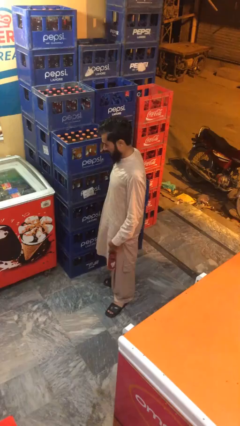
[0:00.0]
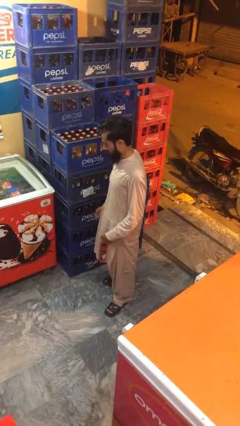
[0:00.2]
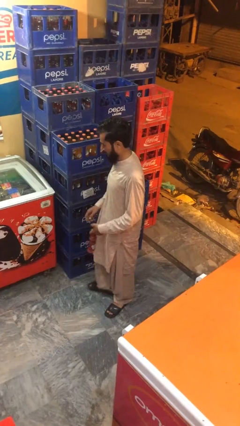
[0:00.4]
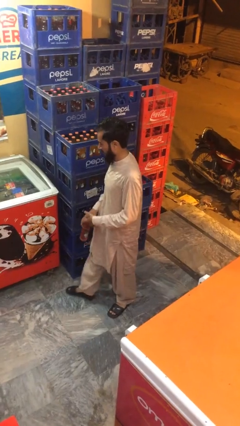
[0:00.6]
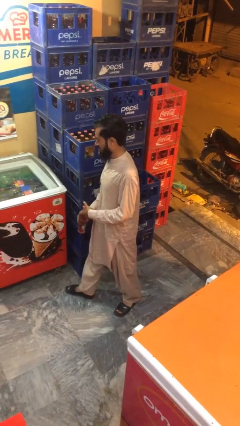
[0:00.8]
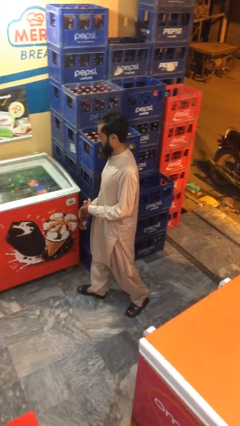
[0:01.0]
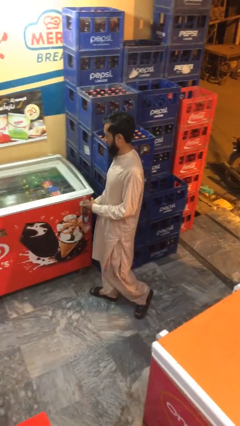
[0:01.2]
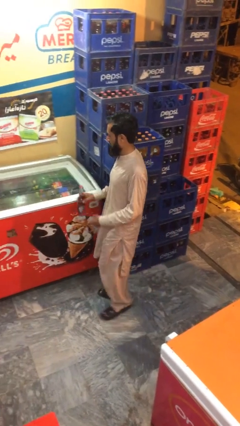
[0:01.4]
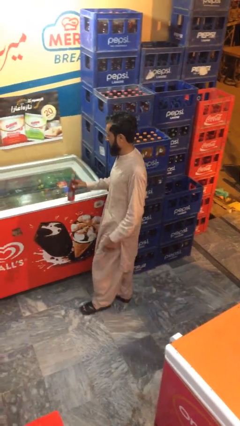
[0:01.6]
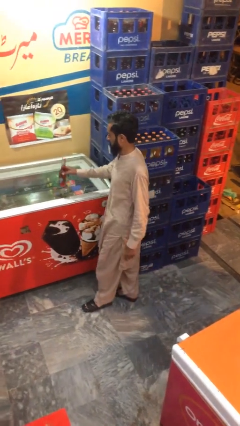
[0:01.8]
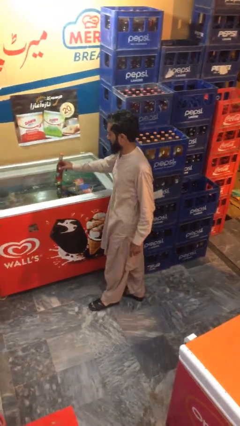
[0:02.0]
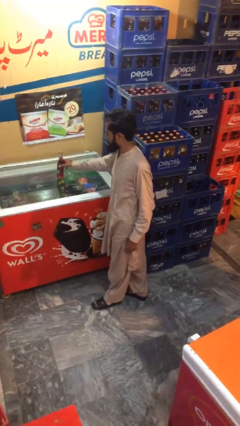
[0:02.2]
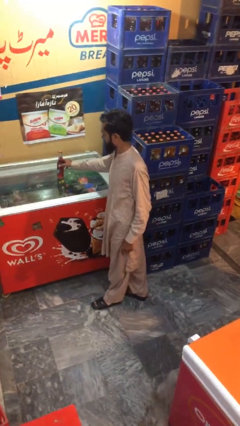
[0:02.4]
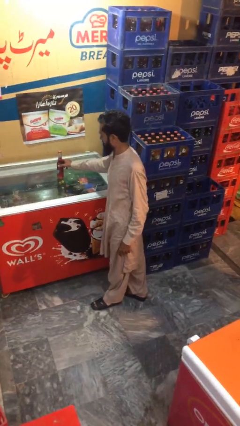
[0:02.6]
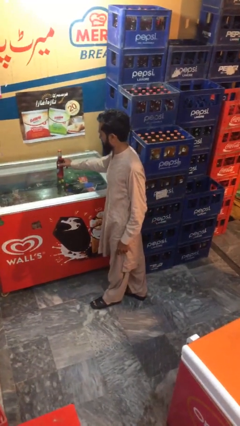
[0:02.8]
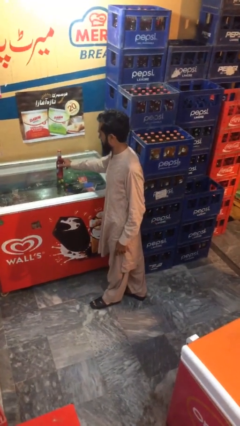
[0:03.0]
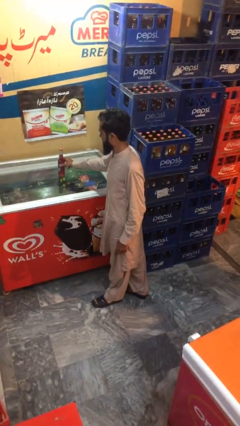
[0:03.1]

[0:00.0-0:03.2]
person puts down object on table

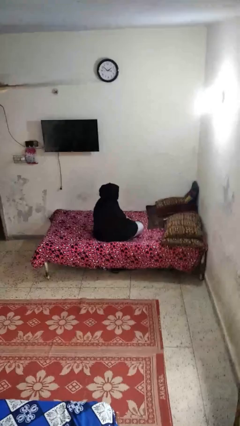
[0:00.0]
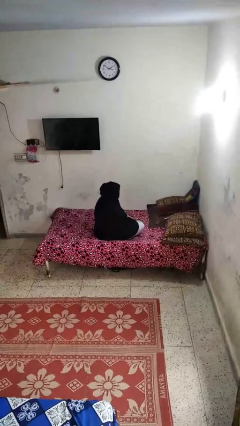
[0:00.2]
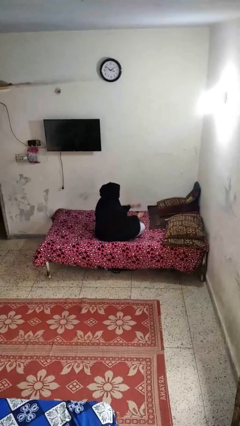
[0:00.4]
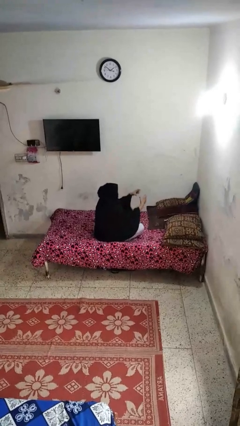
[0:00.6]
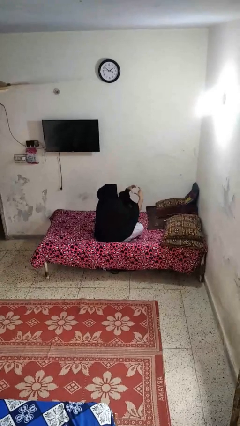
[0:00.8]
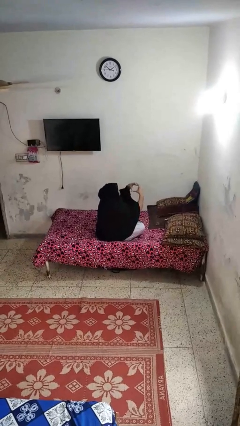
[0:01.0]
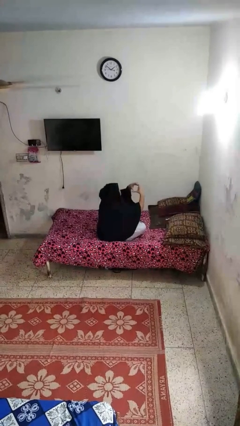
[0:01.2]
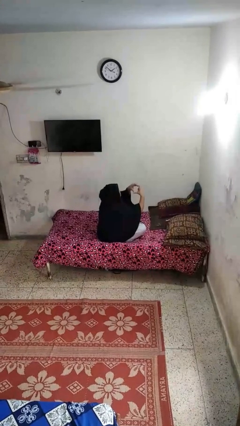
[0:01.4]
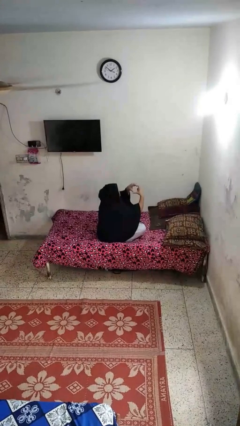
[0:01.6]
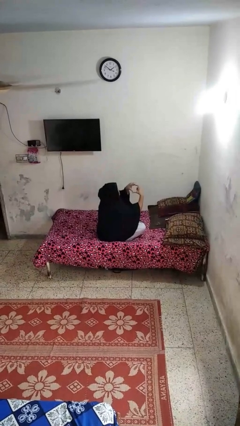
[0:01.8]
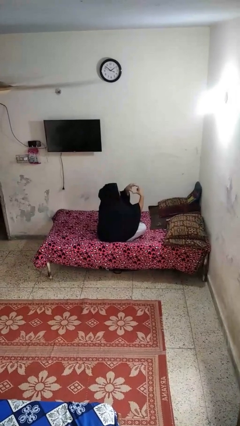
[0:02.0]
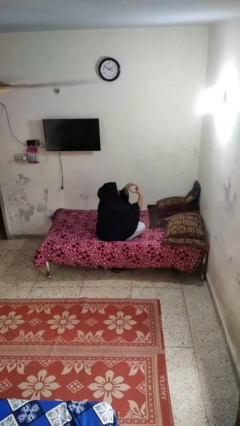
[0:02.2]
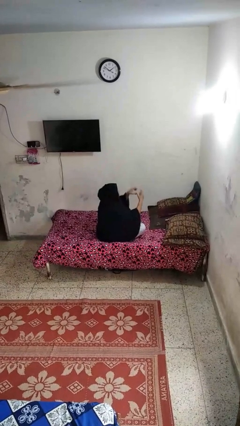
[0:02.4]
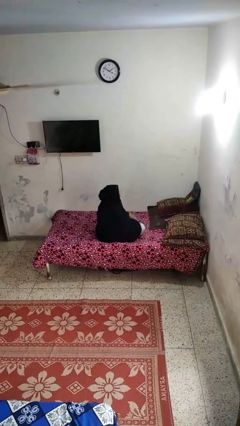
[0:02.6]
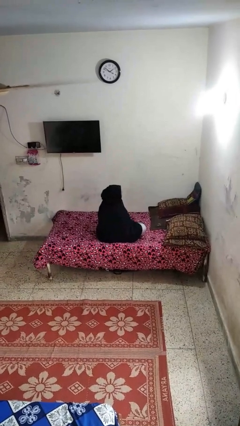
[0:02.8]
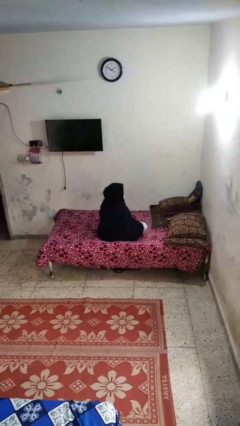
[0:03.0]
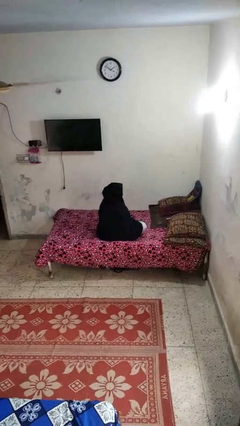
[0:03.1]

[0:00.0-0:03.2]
person gestures heart

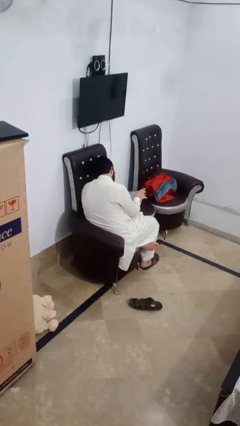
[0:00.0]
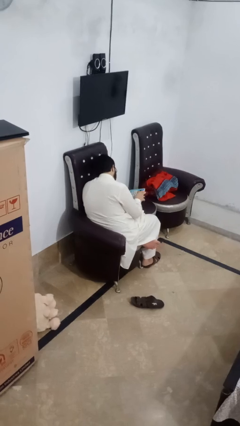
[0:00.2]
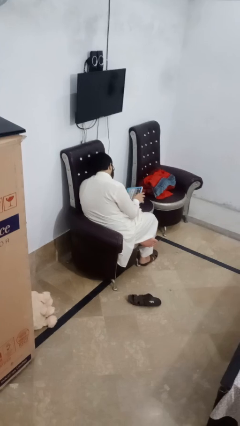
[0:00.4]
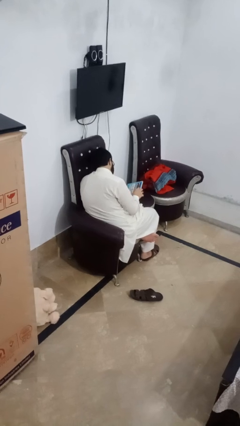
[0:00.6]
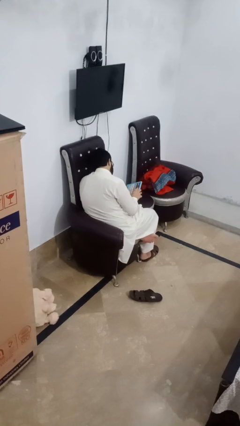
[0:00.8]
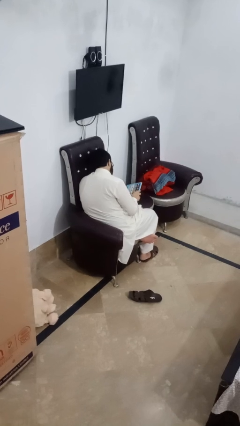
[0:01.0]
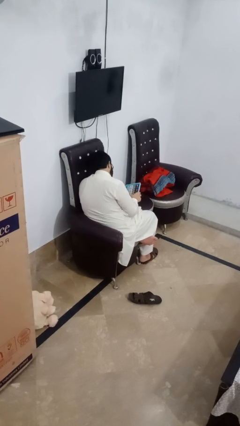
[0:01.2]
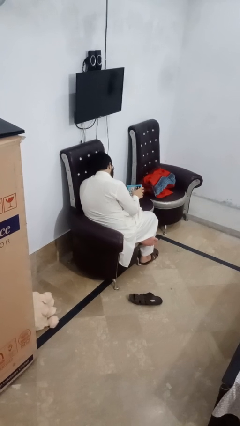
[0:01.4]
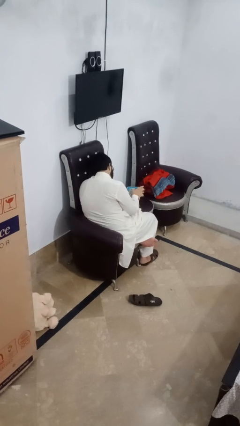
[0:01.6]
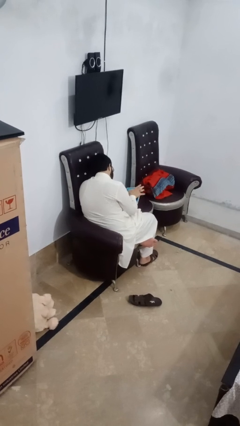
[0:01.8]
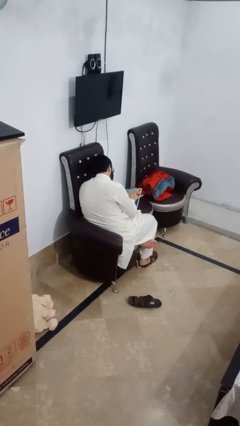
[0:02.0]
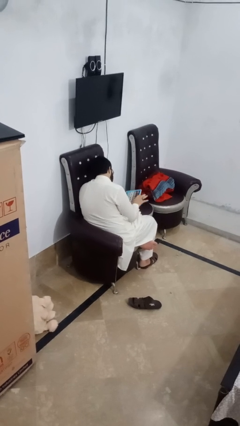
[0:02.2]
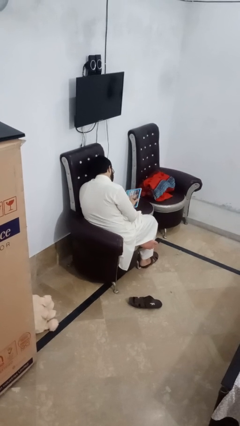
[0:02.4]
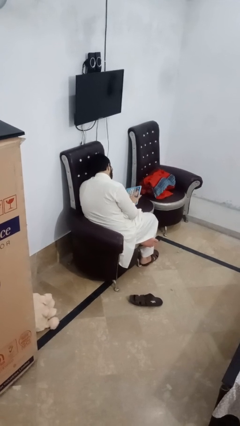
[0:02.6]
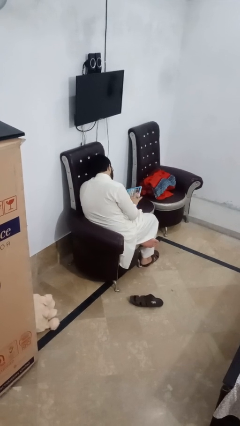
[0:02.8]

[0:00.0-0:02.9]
person interacts with tablet

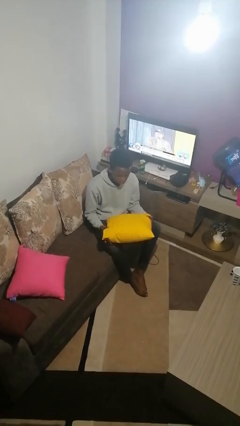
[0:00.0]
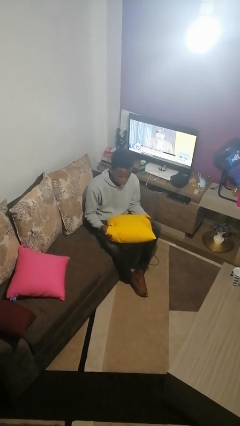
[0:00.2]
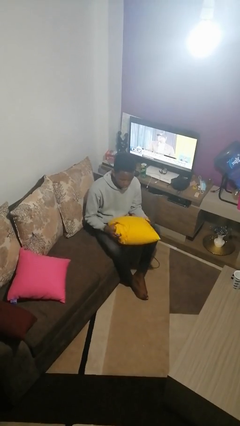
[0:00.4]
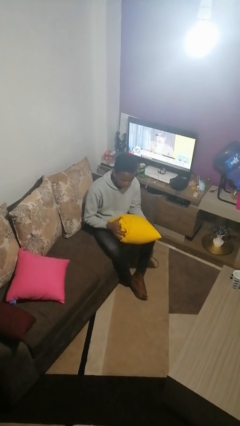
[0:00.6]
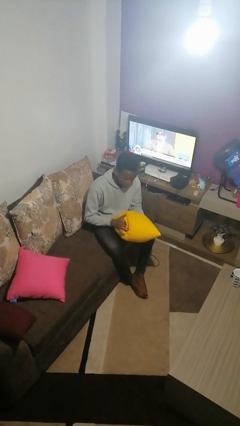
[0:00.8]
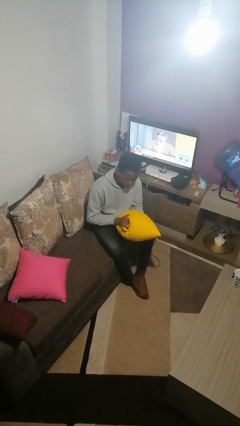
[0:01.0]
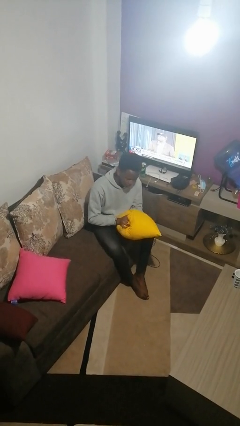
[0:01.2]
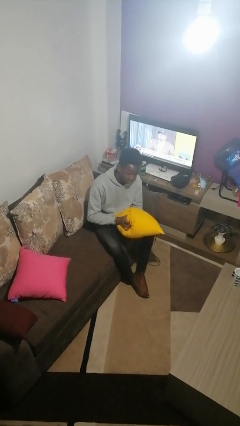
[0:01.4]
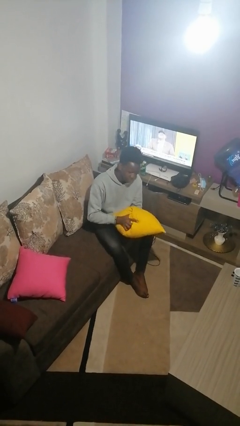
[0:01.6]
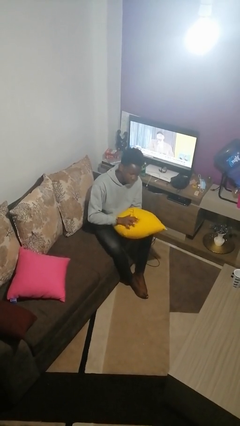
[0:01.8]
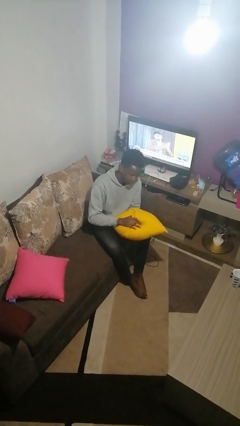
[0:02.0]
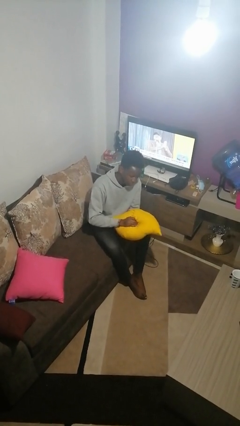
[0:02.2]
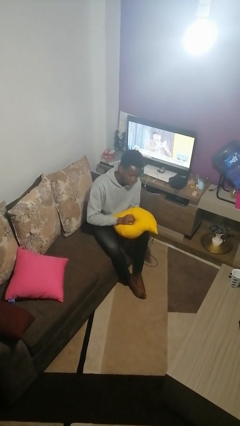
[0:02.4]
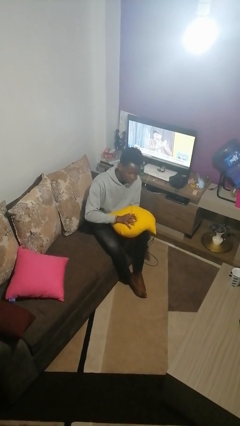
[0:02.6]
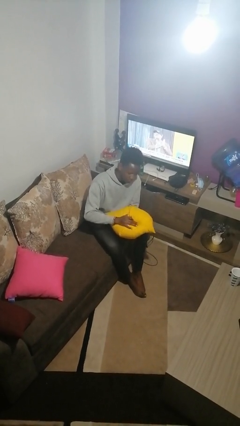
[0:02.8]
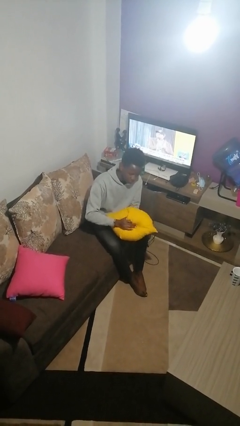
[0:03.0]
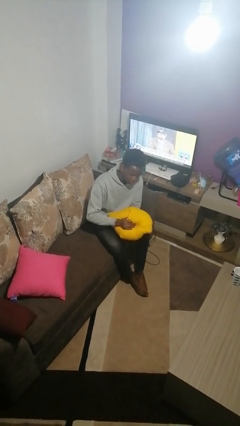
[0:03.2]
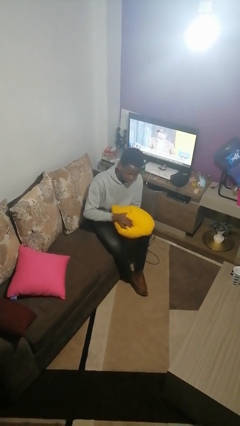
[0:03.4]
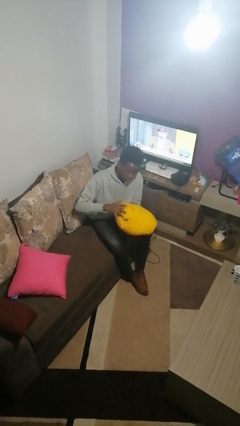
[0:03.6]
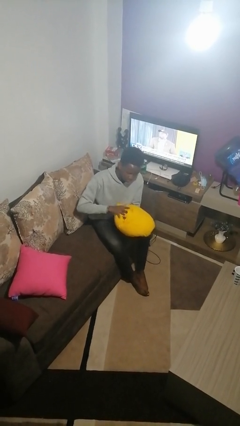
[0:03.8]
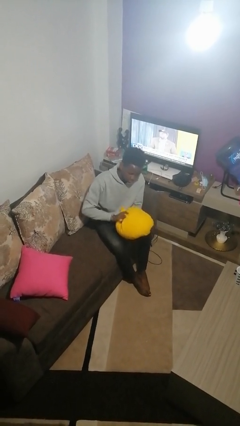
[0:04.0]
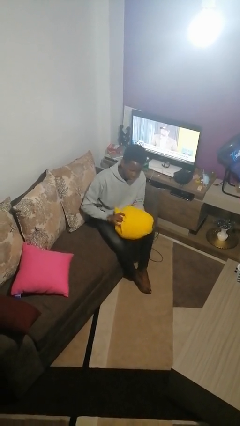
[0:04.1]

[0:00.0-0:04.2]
person squeezes object

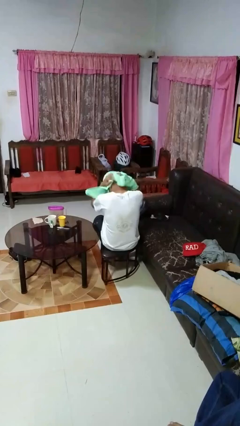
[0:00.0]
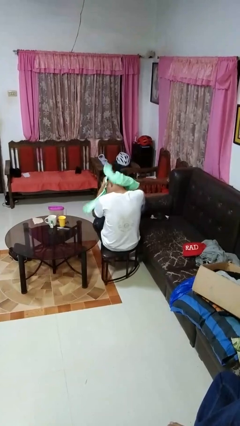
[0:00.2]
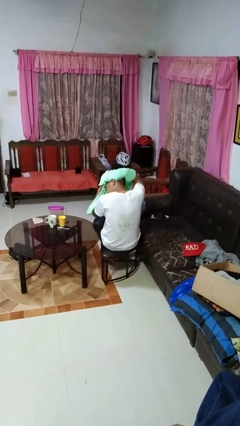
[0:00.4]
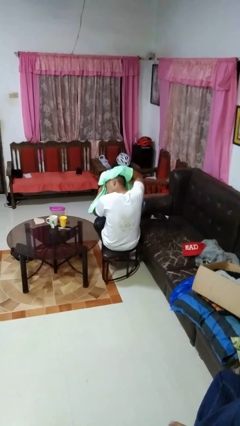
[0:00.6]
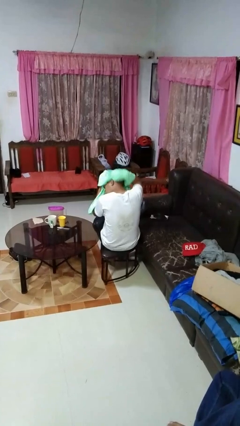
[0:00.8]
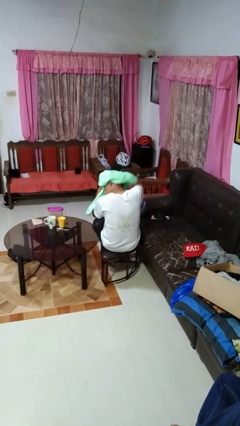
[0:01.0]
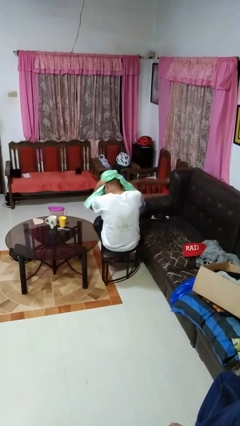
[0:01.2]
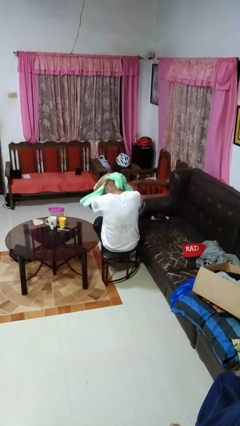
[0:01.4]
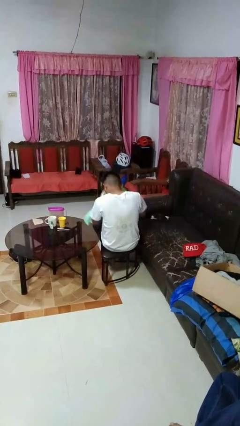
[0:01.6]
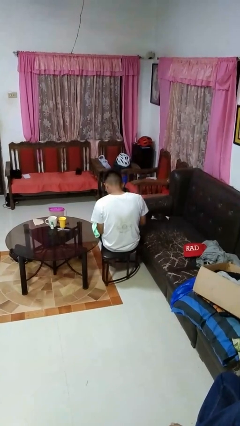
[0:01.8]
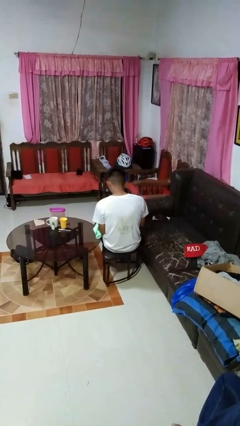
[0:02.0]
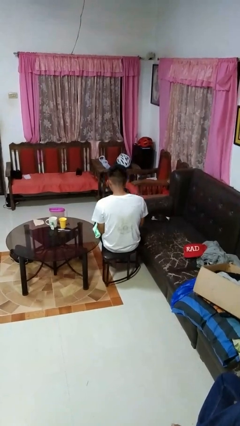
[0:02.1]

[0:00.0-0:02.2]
person dries hair with towel

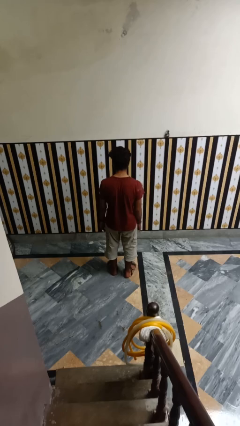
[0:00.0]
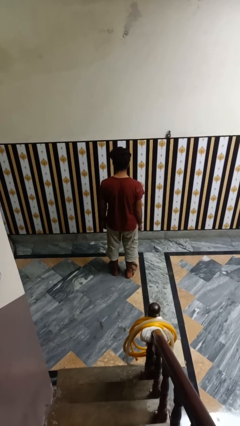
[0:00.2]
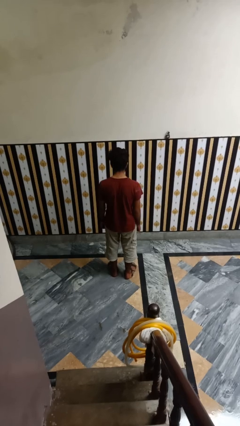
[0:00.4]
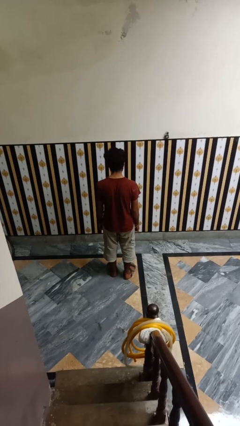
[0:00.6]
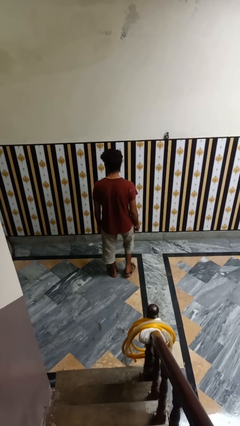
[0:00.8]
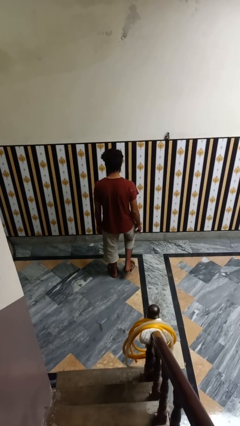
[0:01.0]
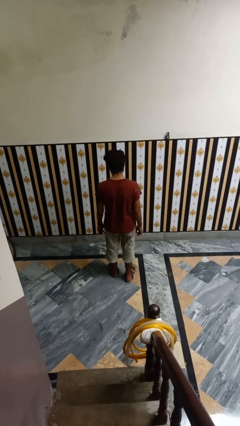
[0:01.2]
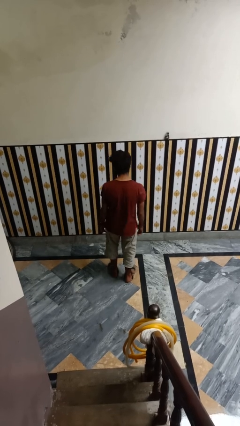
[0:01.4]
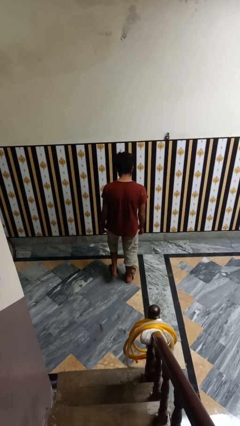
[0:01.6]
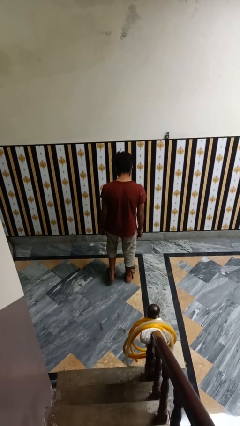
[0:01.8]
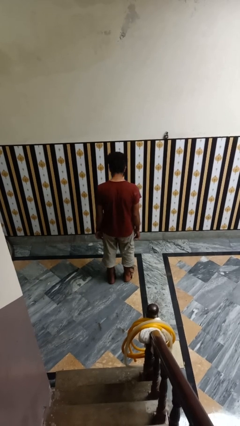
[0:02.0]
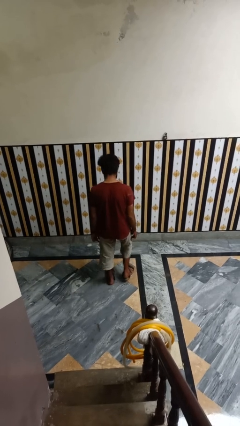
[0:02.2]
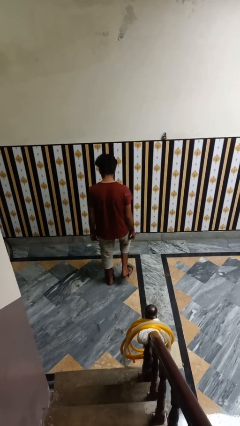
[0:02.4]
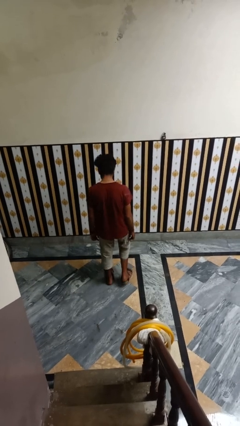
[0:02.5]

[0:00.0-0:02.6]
person walks tiptoe
